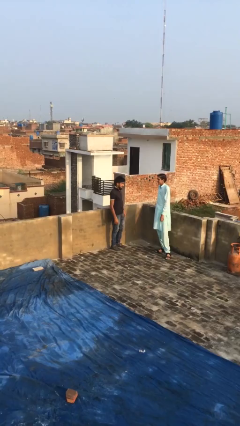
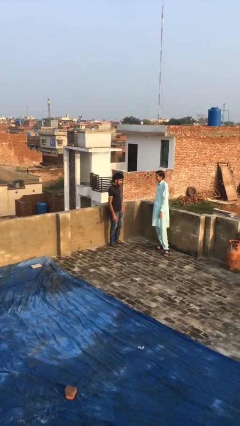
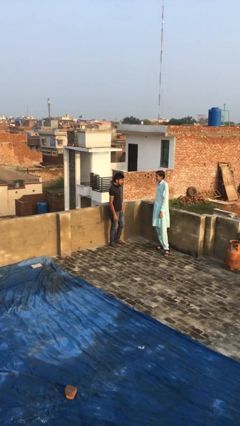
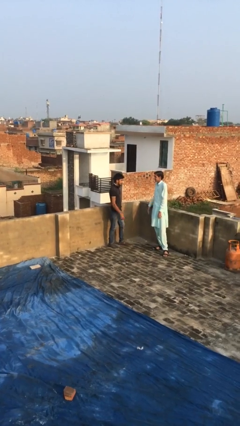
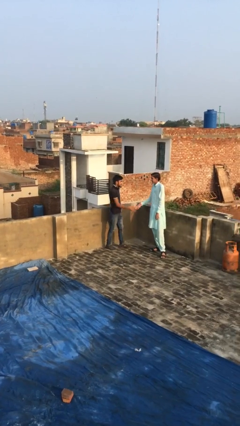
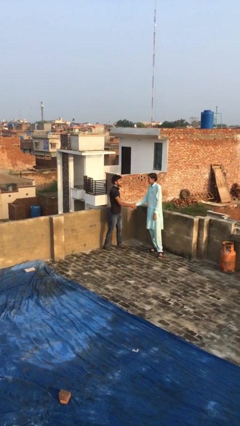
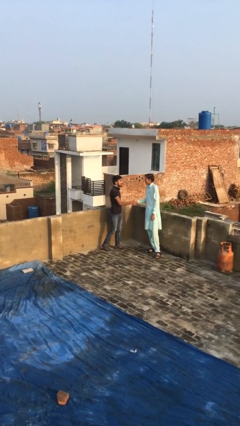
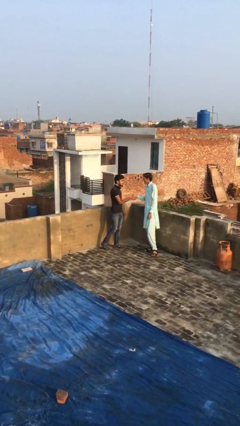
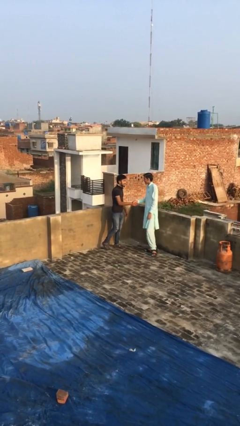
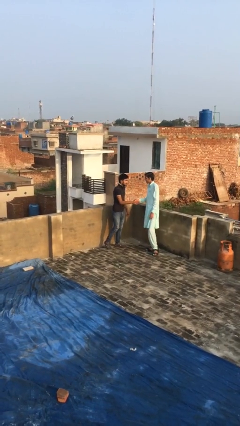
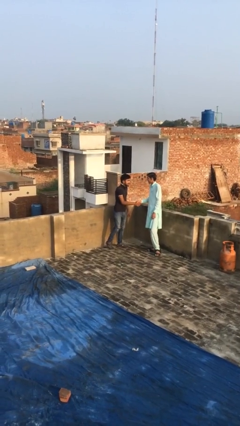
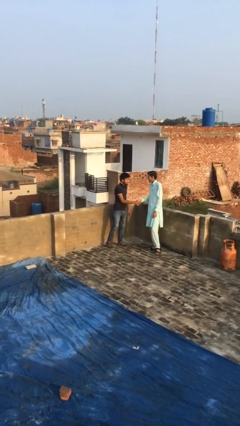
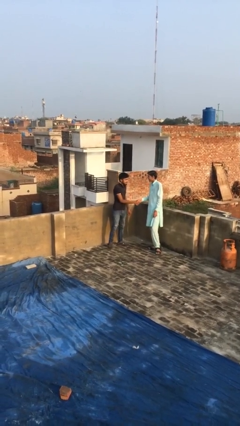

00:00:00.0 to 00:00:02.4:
person shakes hand

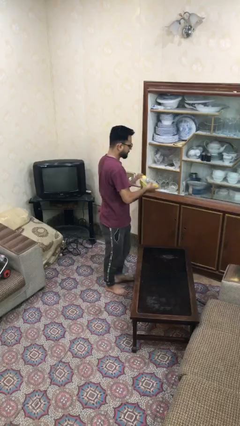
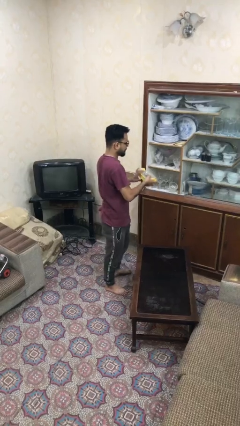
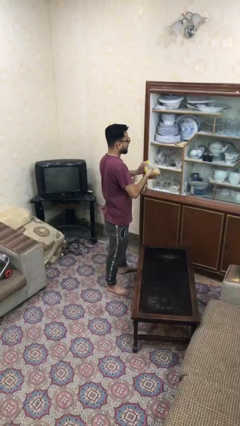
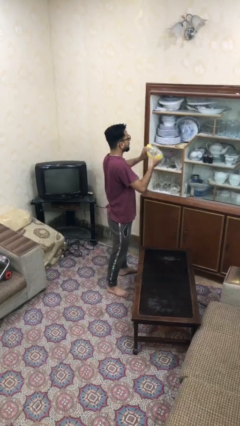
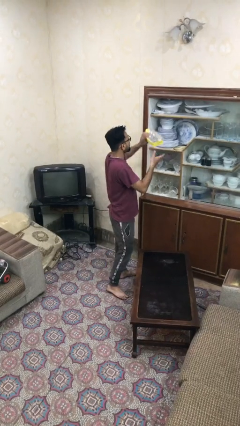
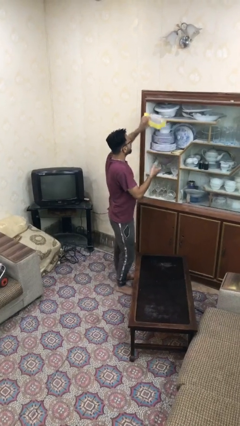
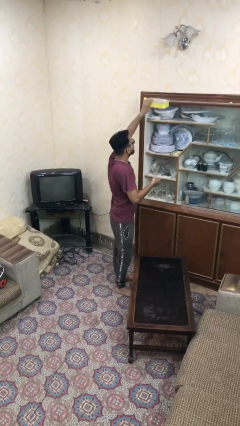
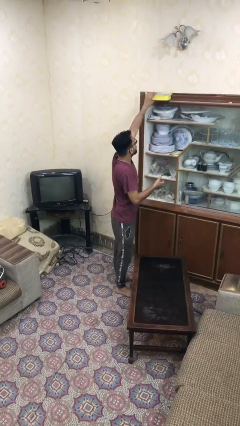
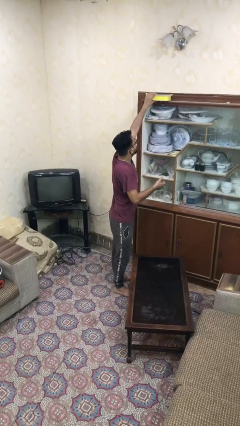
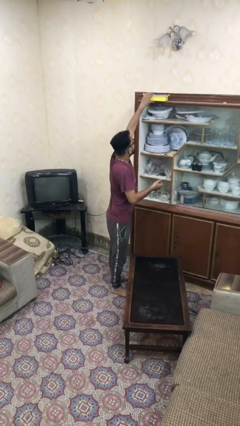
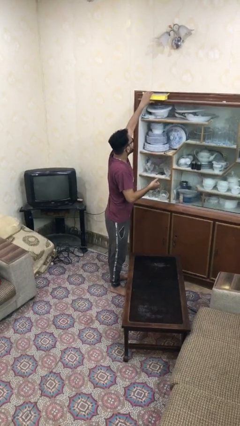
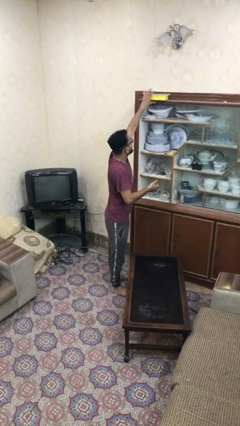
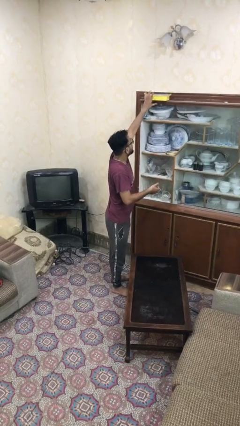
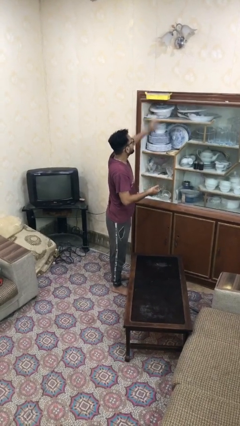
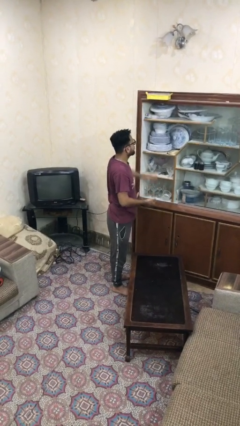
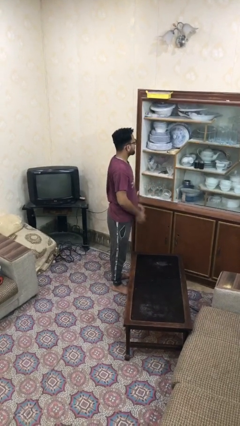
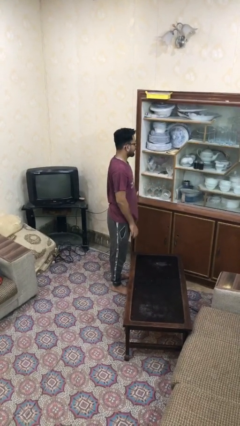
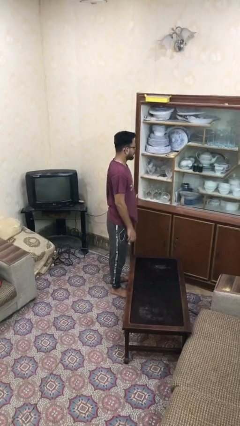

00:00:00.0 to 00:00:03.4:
person puts down object on shelf

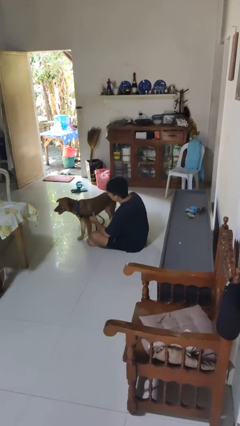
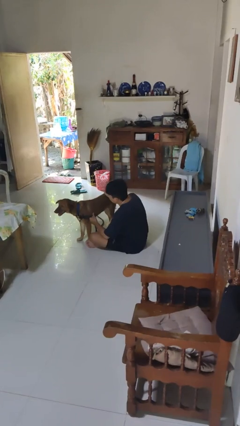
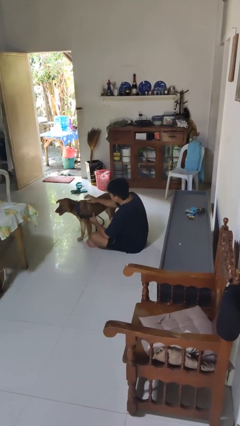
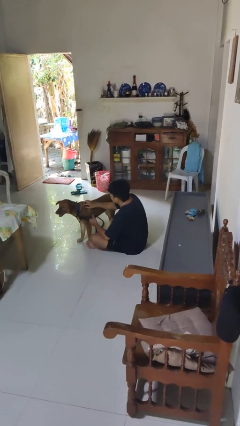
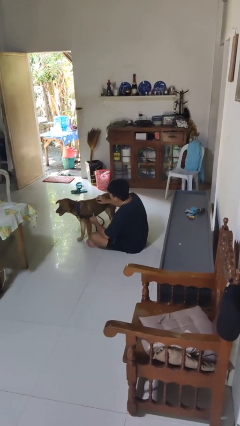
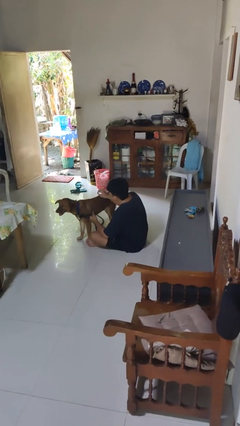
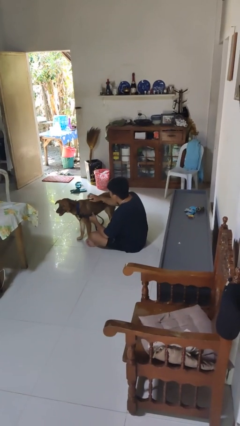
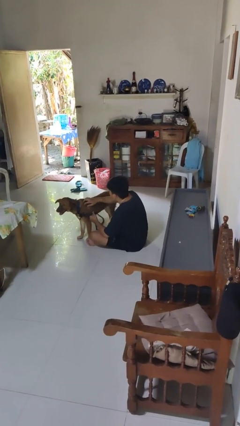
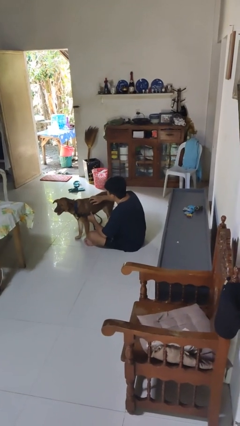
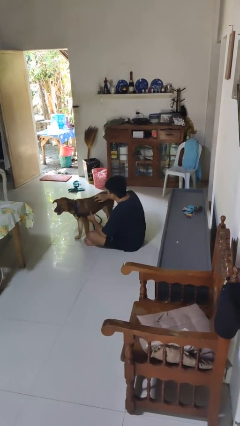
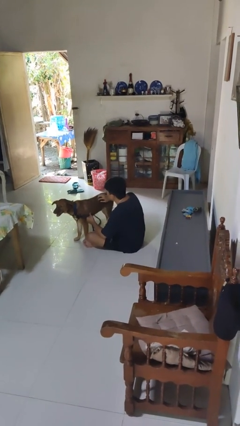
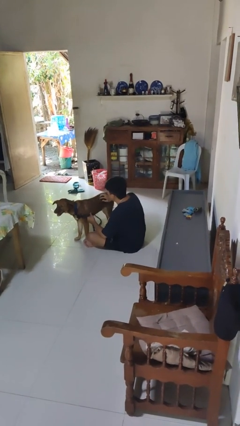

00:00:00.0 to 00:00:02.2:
person pets dog

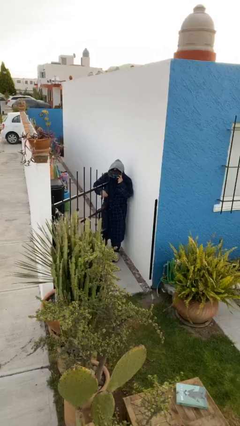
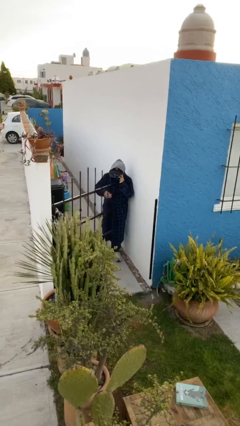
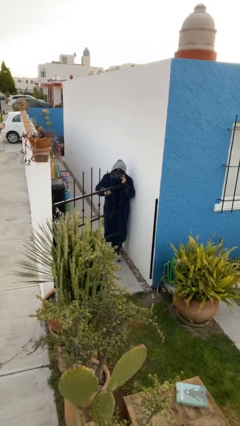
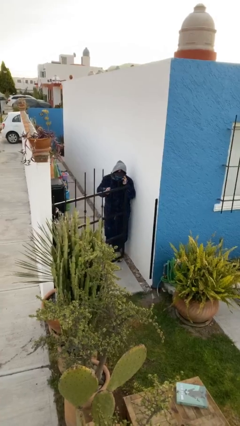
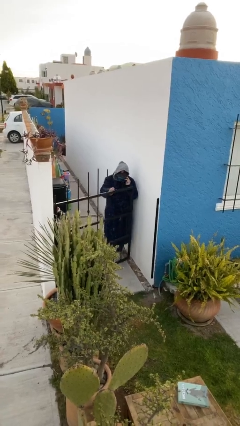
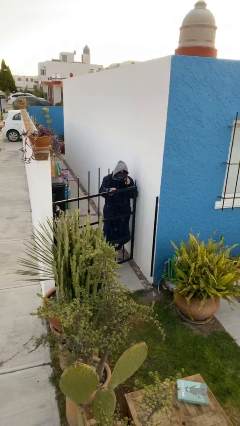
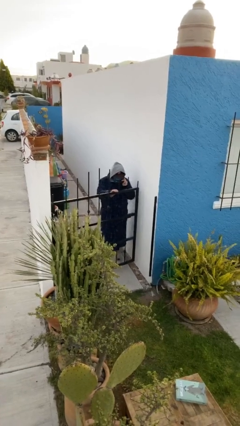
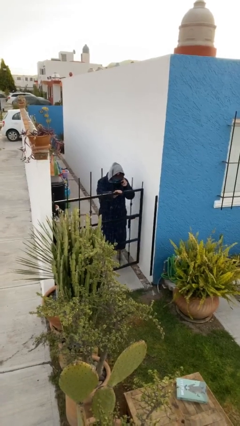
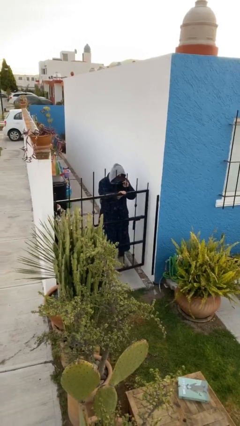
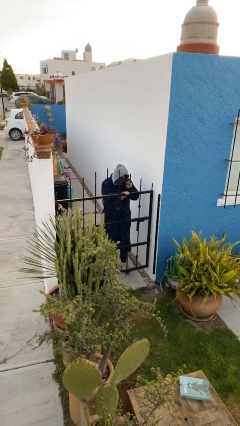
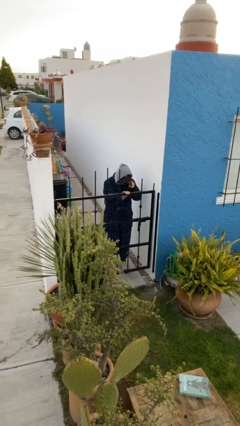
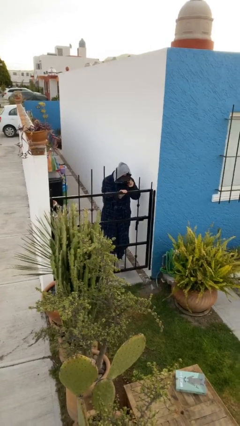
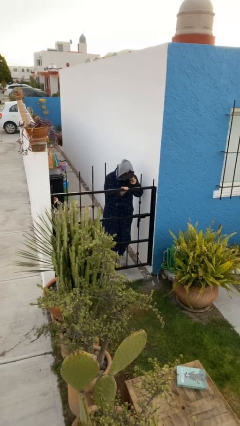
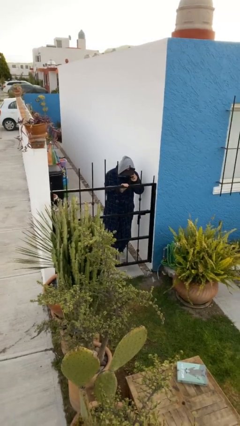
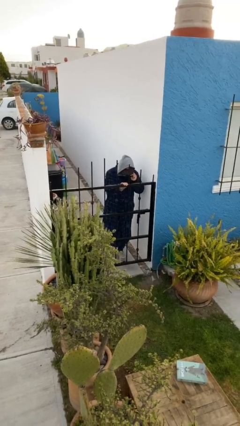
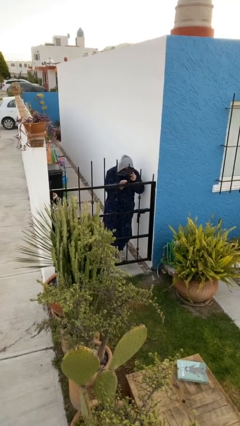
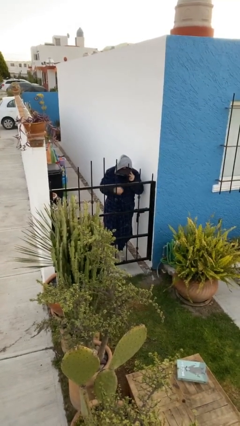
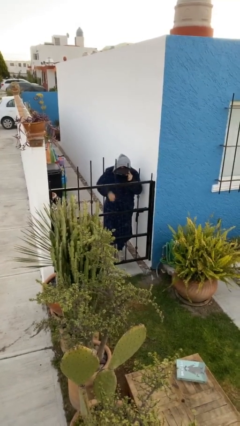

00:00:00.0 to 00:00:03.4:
person closes facility door

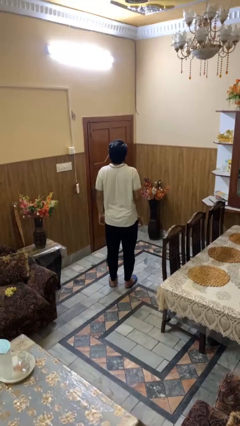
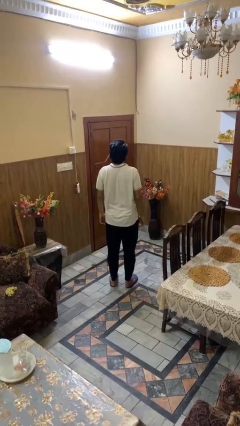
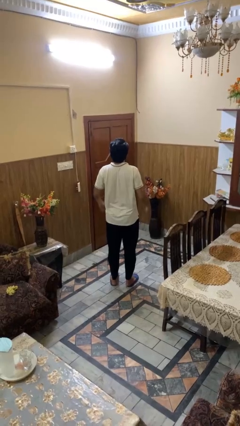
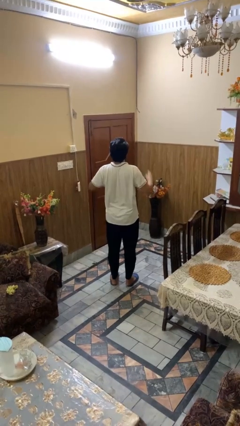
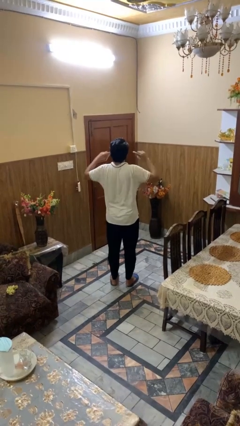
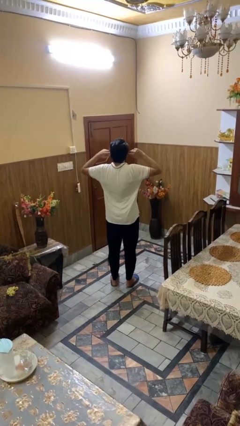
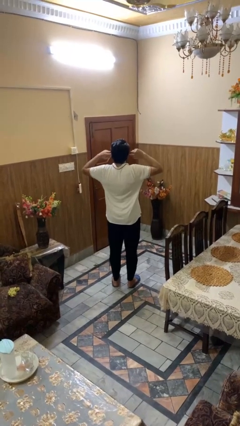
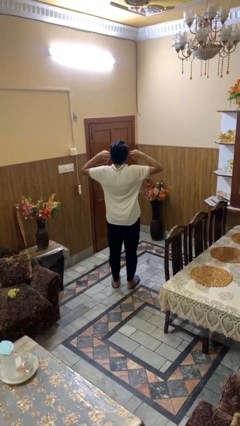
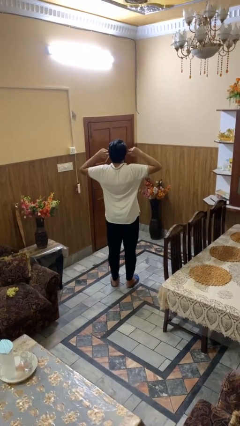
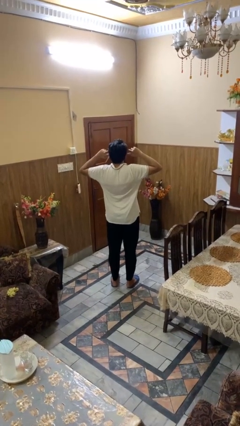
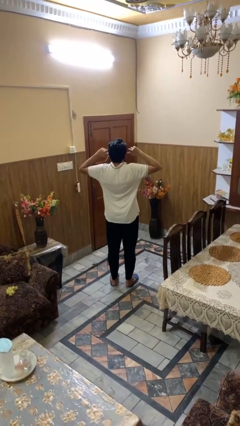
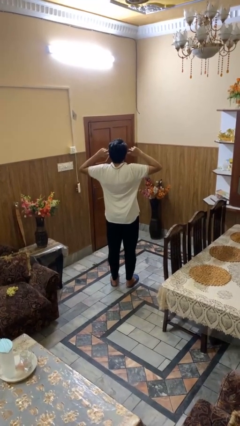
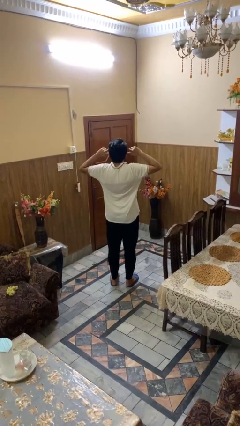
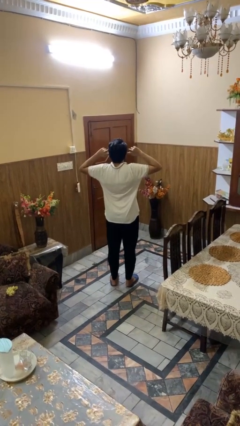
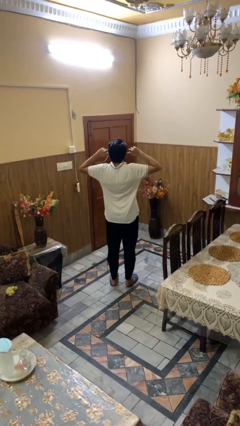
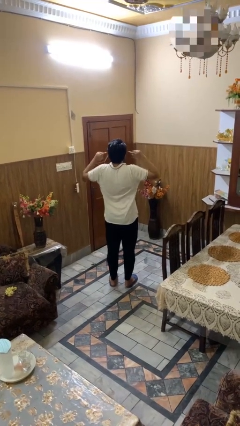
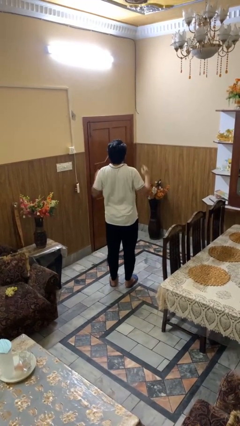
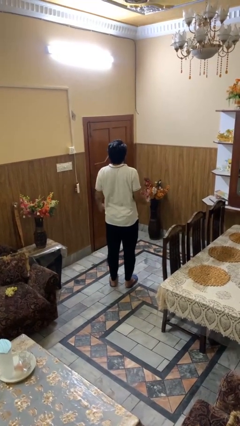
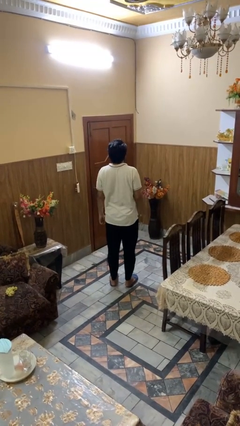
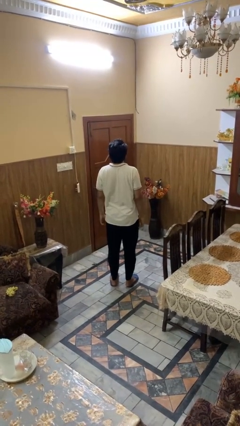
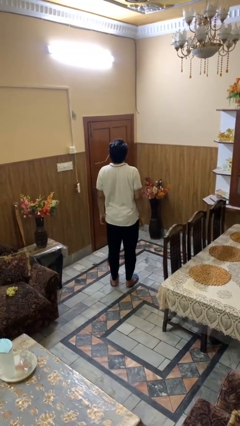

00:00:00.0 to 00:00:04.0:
person puts fingers in ear

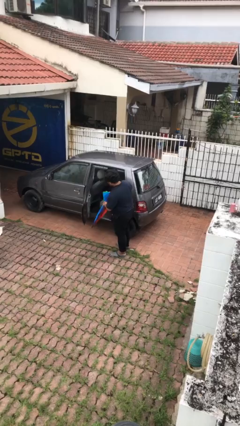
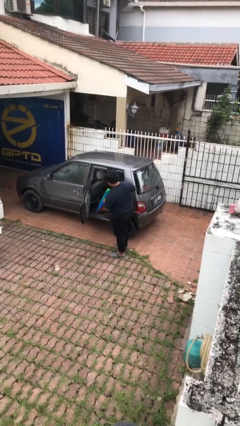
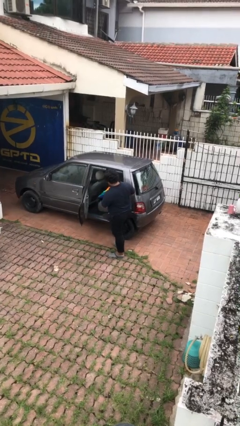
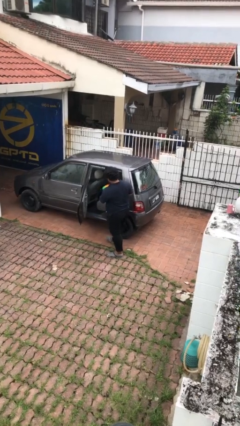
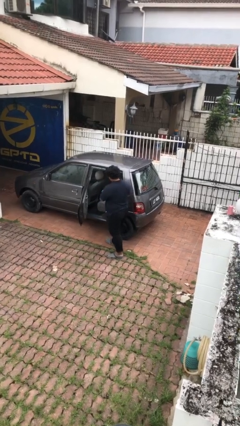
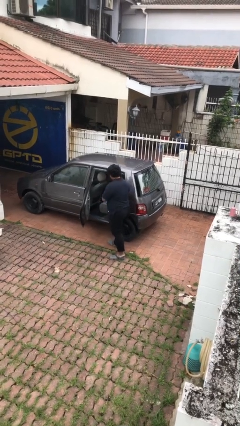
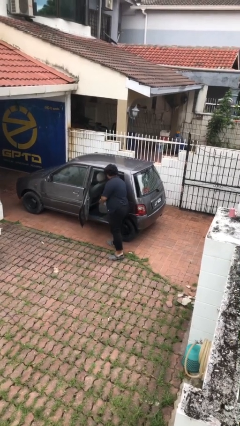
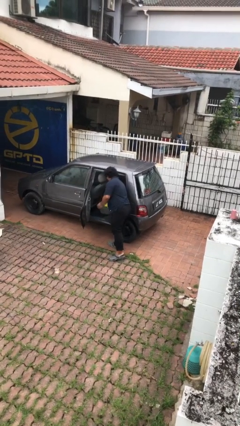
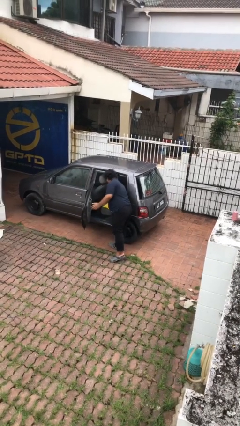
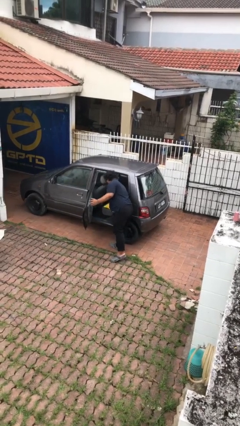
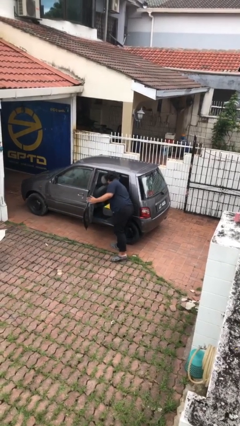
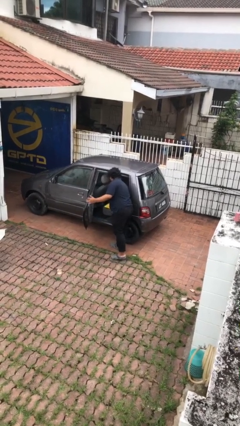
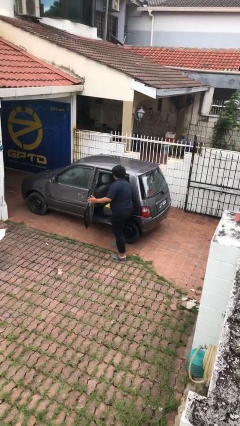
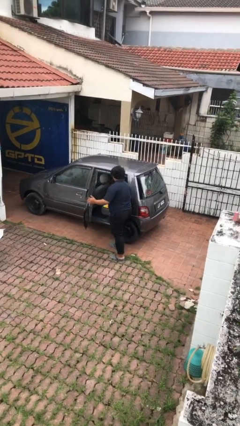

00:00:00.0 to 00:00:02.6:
person loads car
